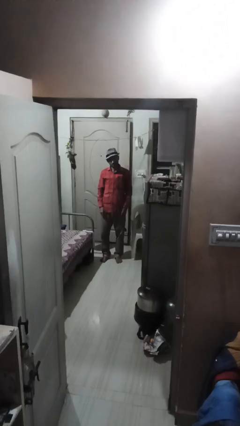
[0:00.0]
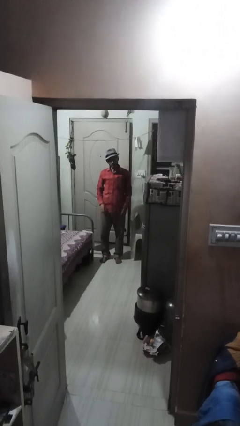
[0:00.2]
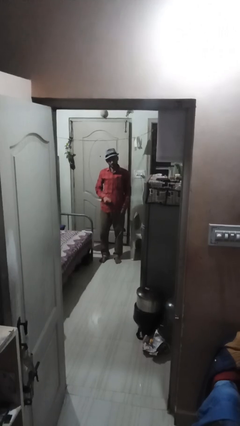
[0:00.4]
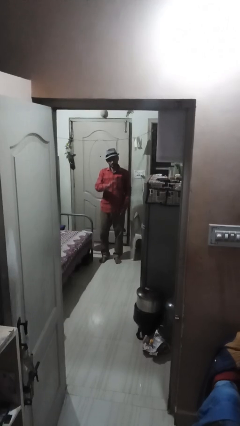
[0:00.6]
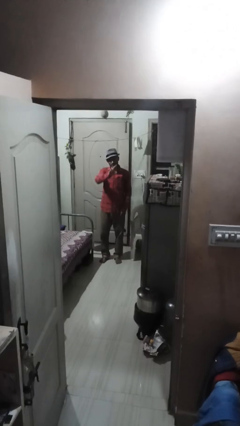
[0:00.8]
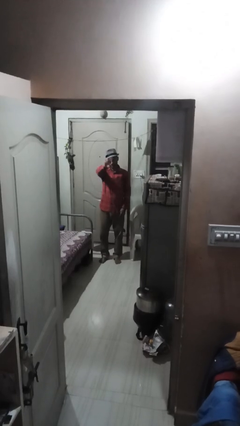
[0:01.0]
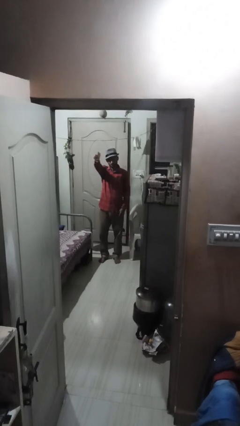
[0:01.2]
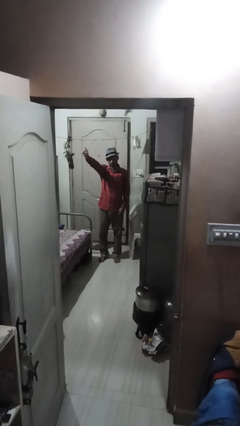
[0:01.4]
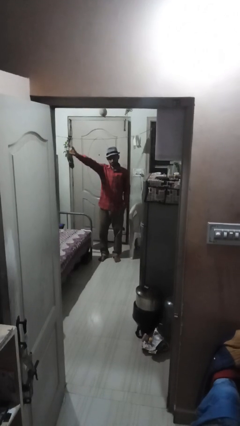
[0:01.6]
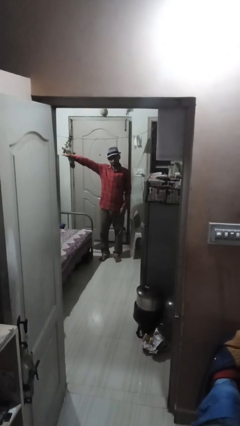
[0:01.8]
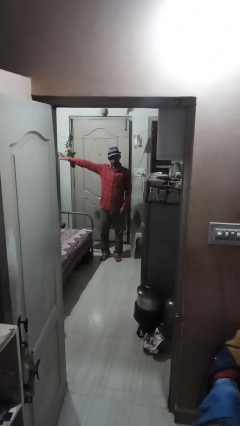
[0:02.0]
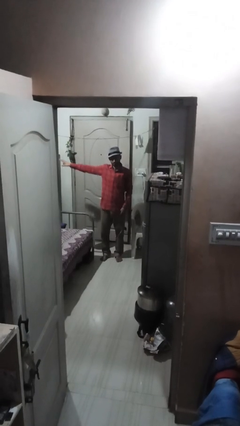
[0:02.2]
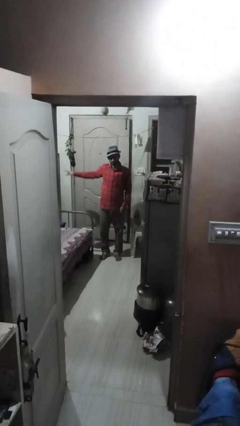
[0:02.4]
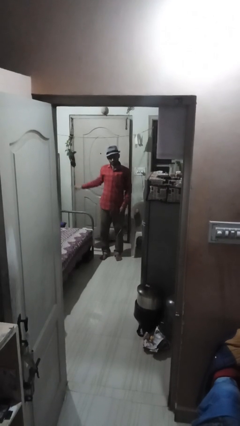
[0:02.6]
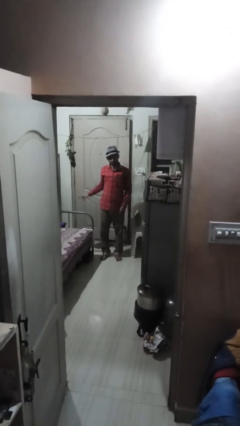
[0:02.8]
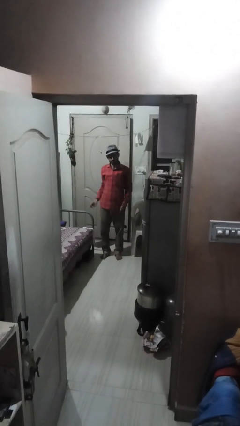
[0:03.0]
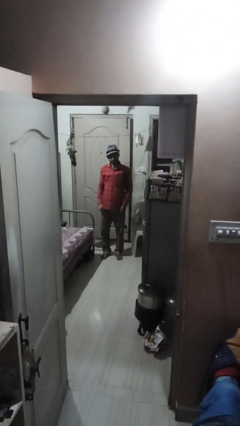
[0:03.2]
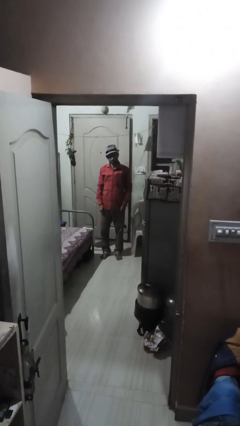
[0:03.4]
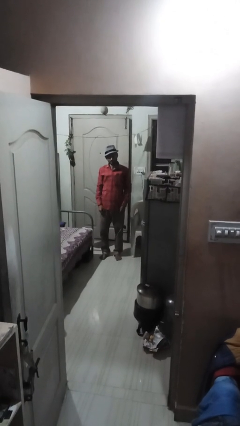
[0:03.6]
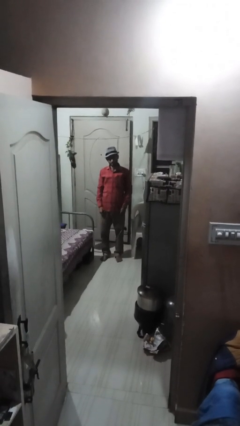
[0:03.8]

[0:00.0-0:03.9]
person gestures swipe right

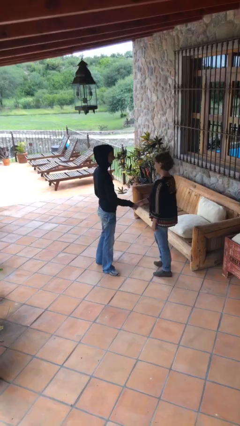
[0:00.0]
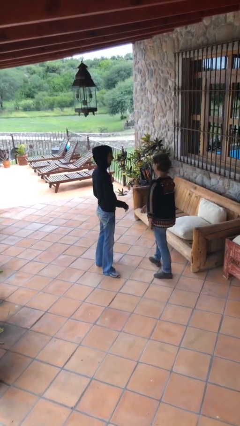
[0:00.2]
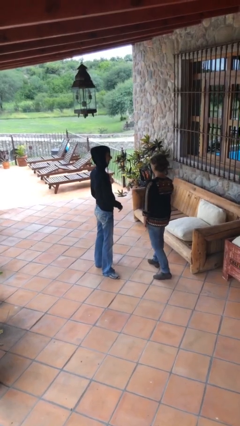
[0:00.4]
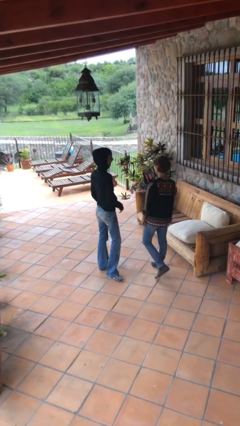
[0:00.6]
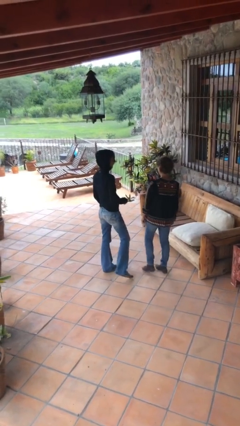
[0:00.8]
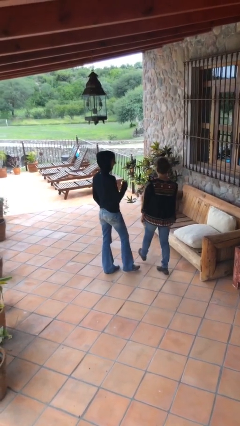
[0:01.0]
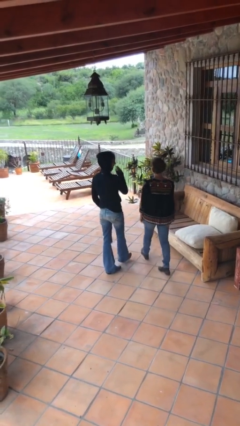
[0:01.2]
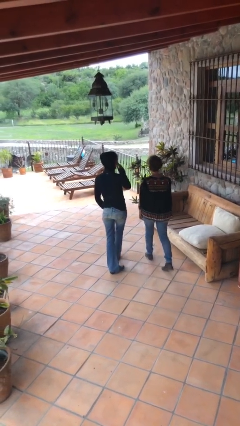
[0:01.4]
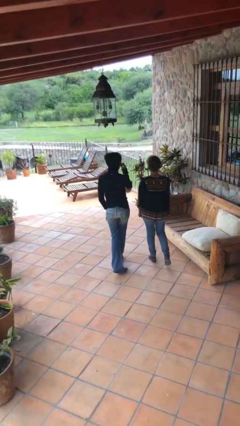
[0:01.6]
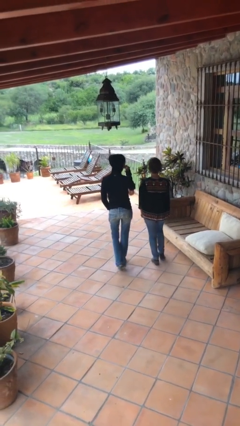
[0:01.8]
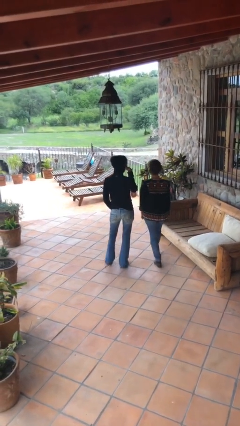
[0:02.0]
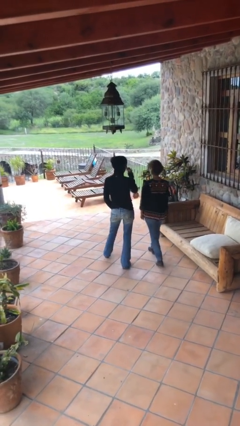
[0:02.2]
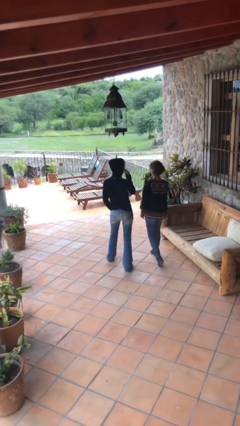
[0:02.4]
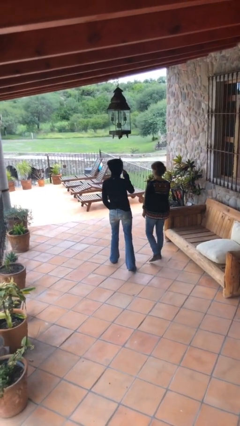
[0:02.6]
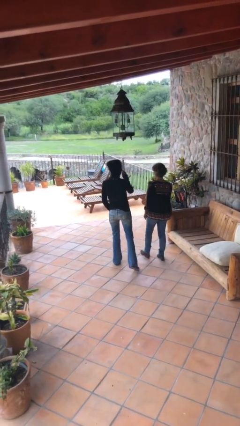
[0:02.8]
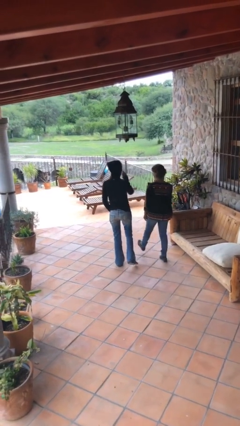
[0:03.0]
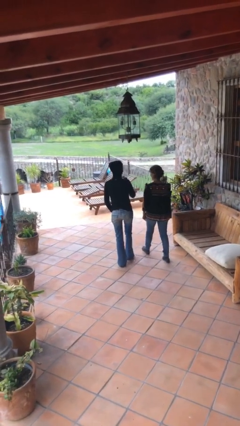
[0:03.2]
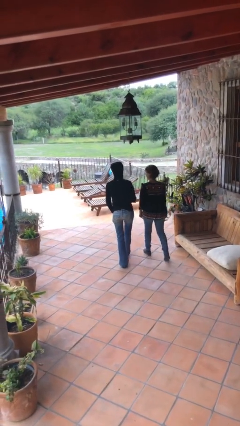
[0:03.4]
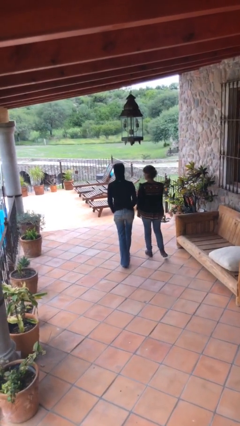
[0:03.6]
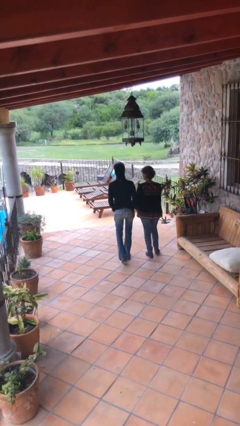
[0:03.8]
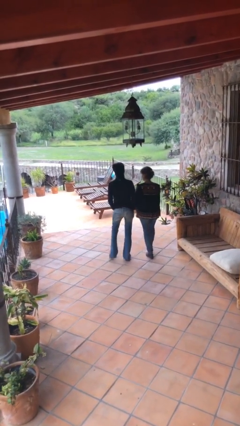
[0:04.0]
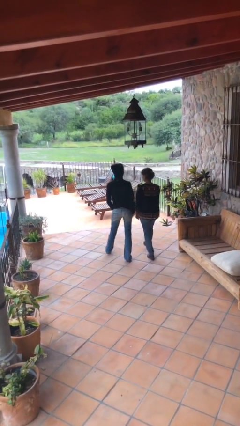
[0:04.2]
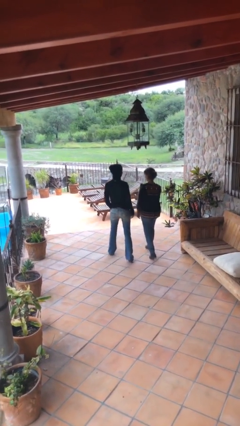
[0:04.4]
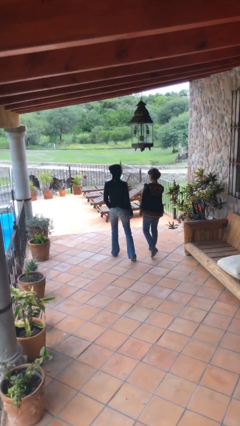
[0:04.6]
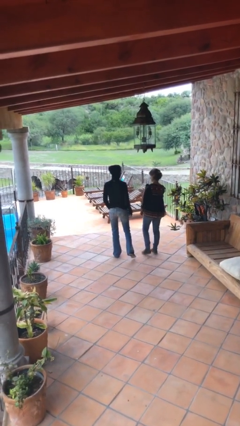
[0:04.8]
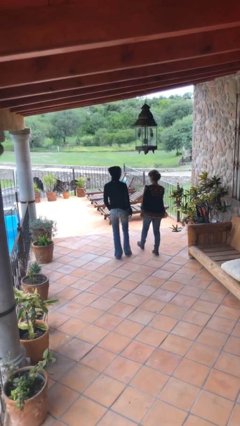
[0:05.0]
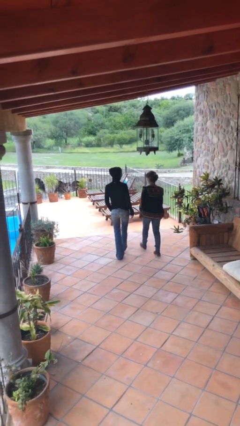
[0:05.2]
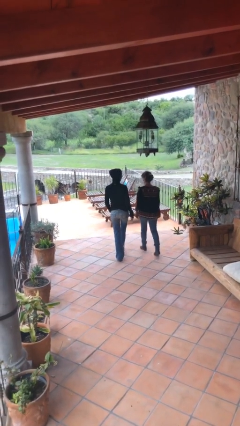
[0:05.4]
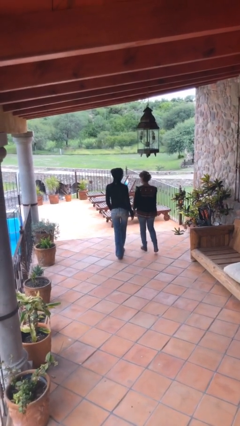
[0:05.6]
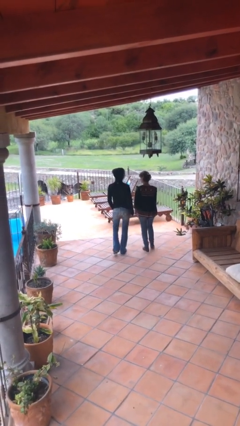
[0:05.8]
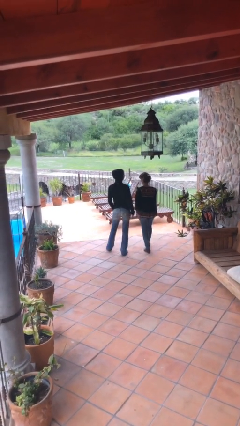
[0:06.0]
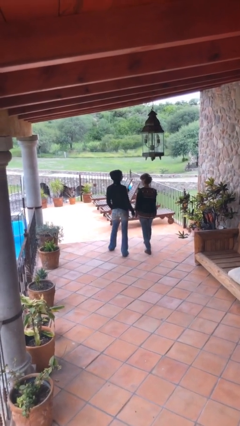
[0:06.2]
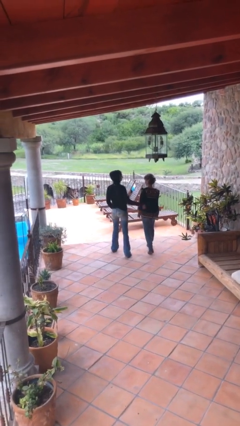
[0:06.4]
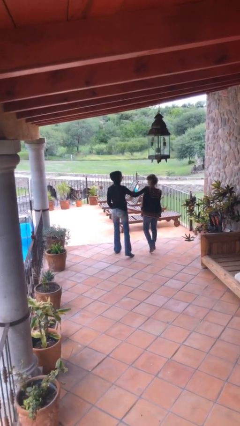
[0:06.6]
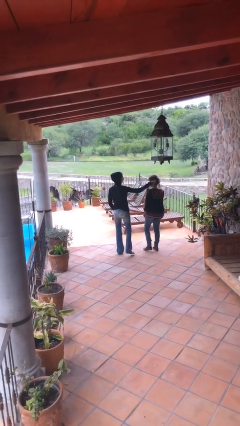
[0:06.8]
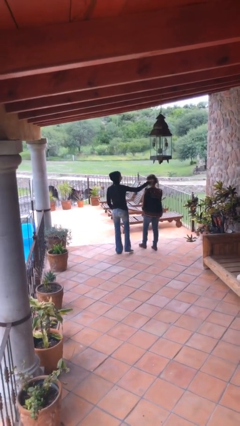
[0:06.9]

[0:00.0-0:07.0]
person talks to person

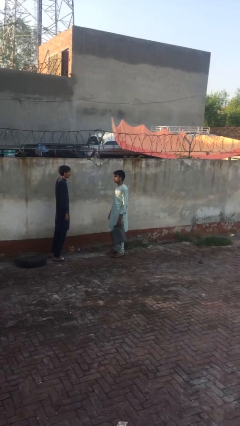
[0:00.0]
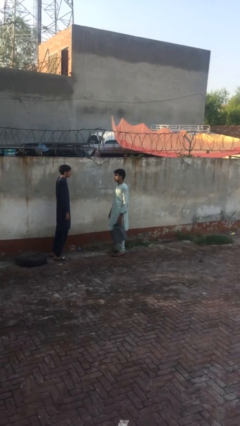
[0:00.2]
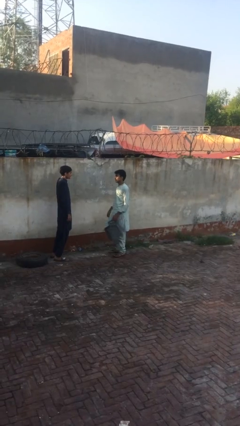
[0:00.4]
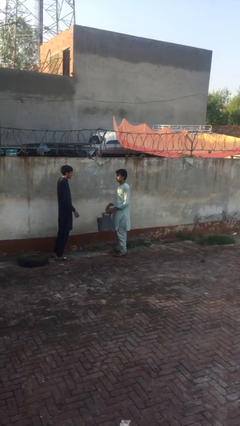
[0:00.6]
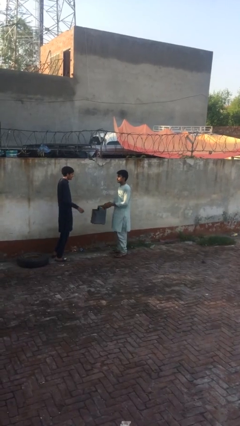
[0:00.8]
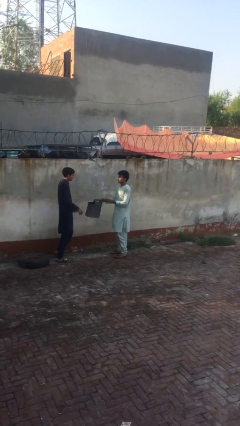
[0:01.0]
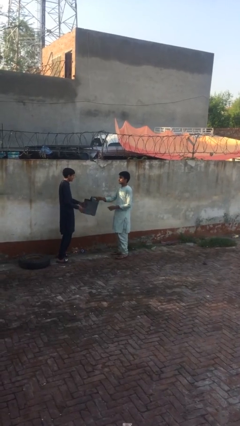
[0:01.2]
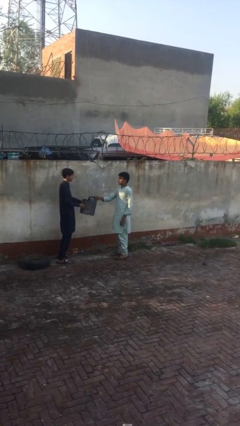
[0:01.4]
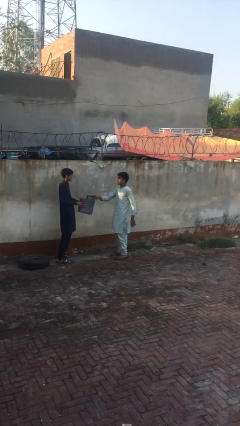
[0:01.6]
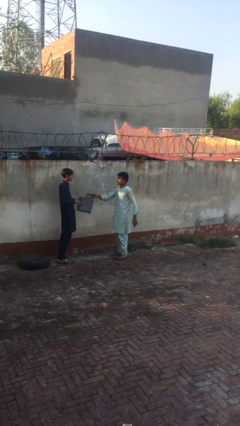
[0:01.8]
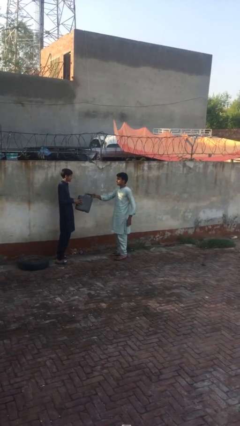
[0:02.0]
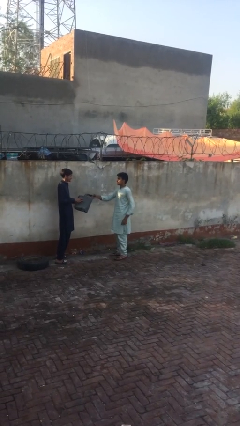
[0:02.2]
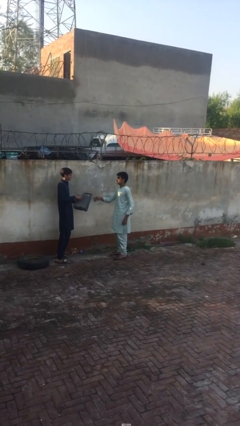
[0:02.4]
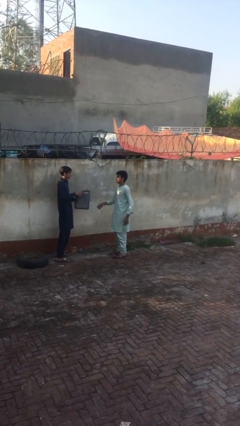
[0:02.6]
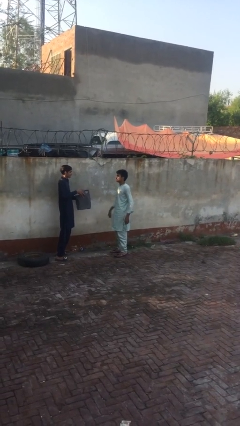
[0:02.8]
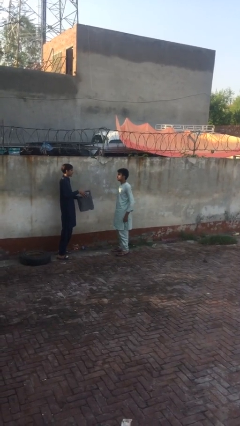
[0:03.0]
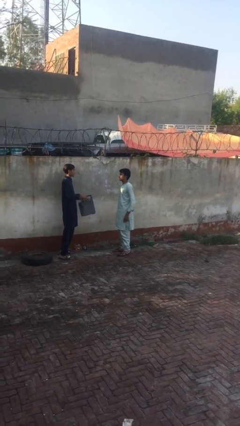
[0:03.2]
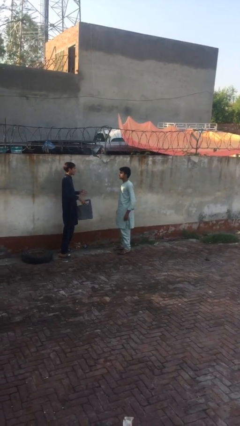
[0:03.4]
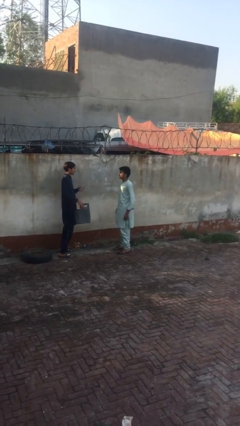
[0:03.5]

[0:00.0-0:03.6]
person transfers object to person

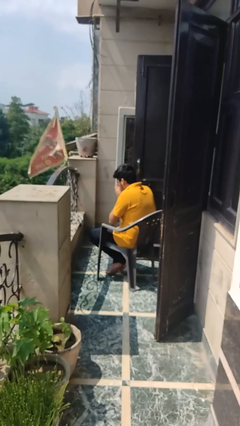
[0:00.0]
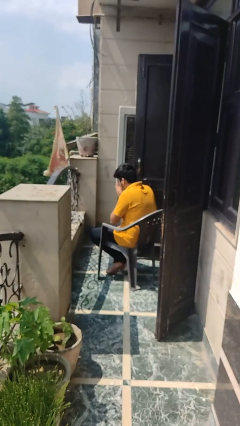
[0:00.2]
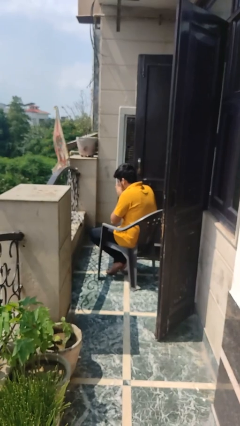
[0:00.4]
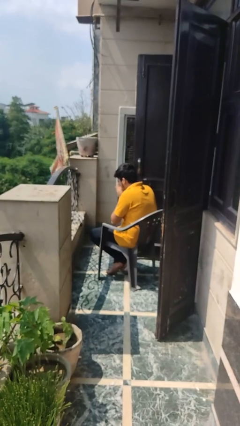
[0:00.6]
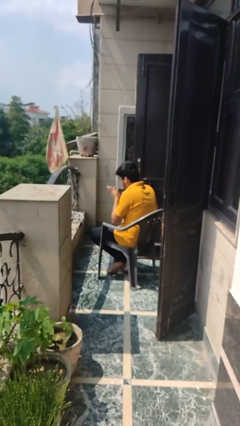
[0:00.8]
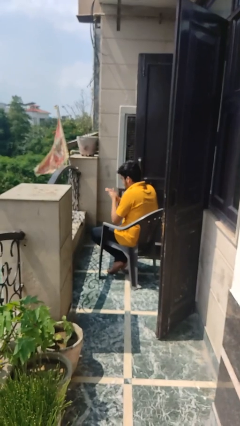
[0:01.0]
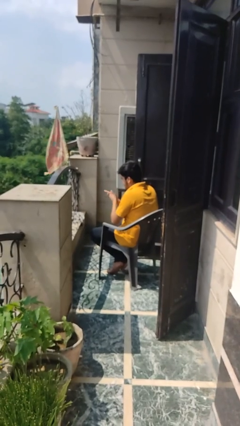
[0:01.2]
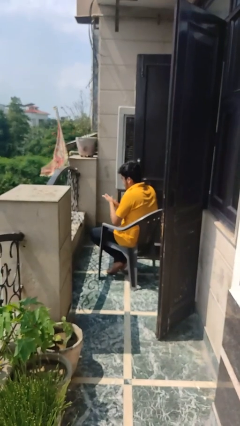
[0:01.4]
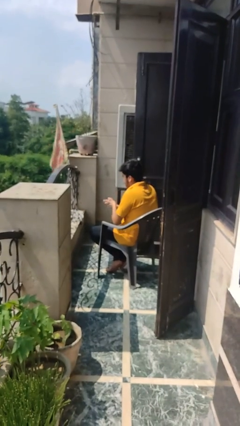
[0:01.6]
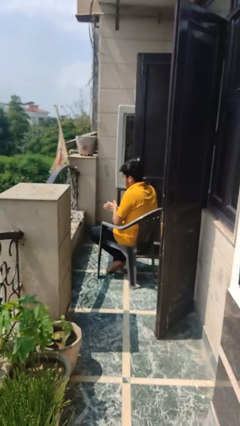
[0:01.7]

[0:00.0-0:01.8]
person blows into hands

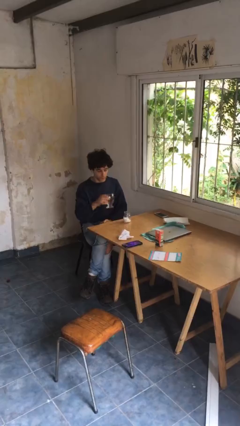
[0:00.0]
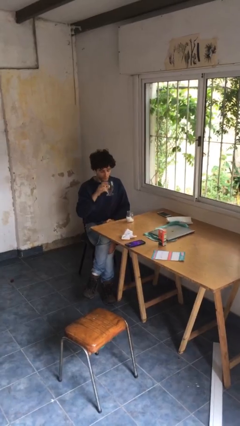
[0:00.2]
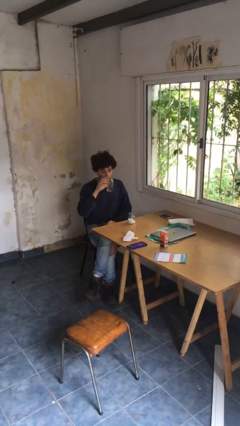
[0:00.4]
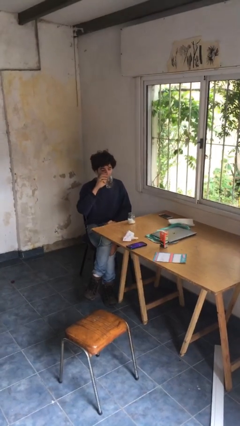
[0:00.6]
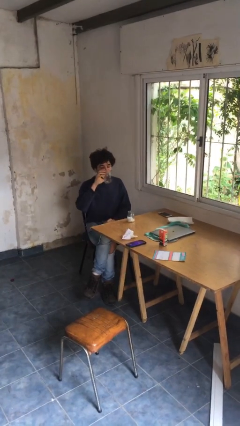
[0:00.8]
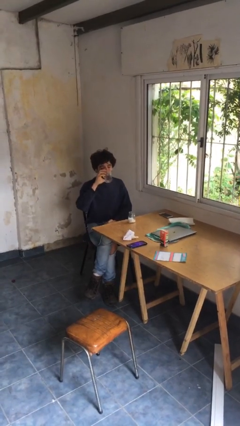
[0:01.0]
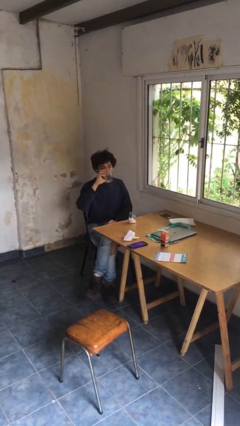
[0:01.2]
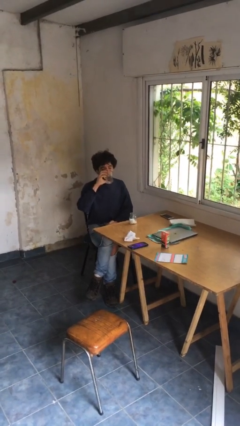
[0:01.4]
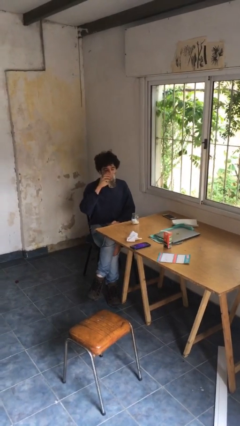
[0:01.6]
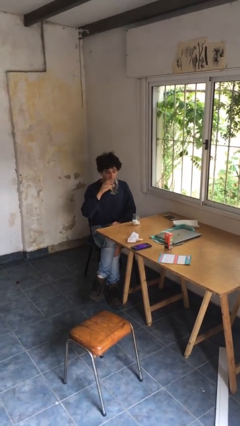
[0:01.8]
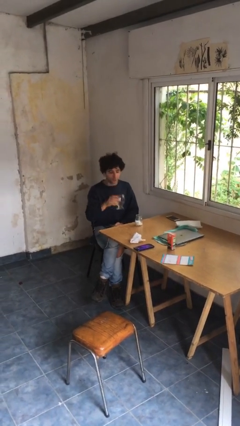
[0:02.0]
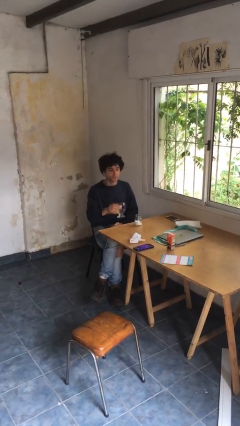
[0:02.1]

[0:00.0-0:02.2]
person drinks from cup
